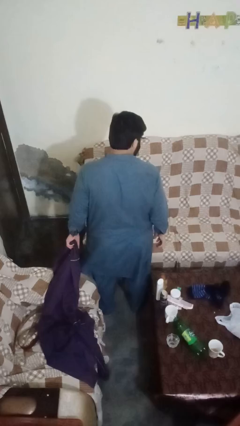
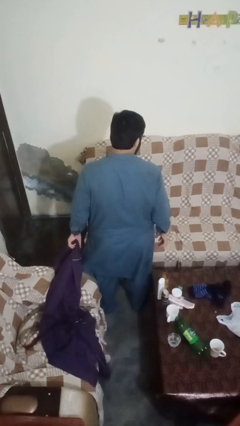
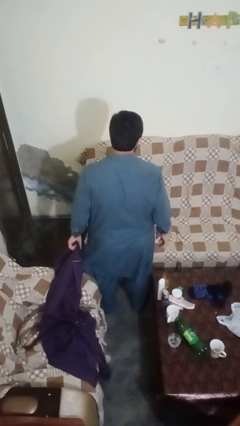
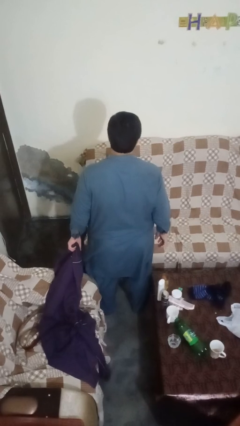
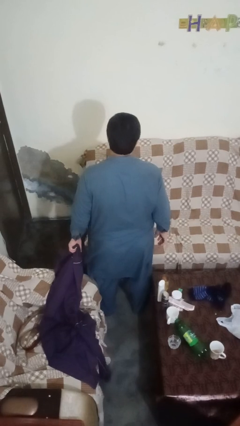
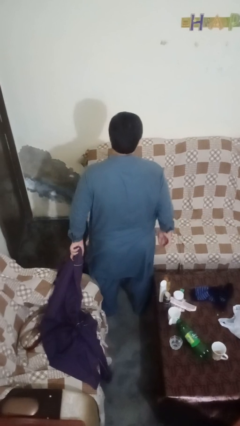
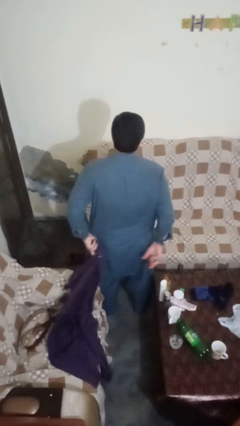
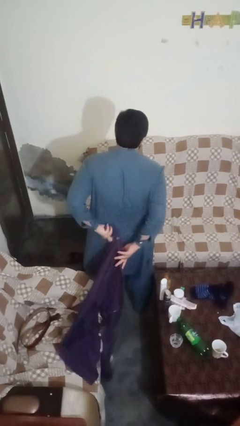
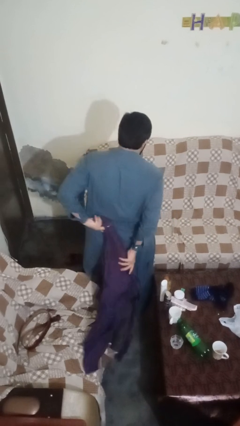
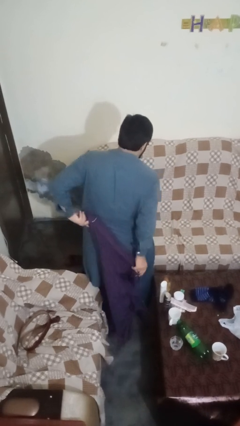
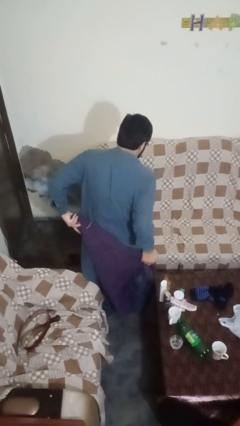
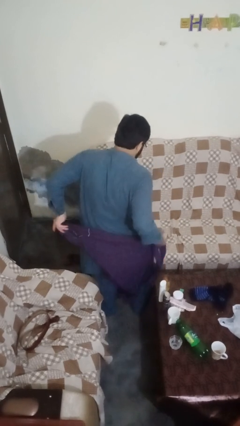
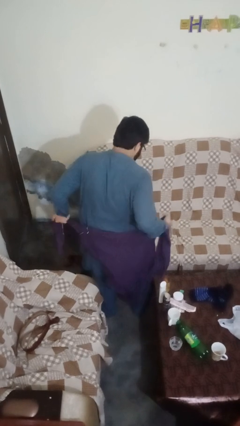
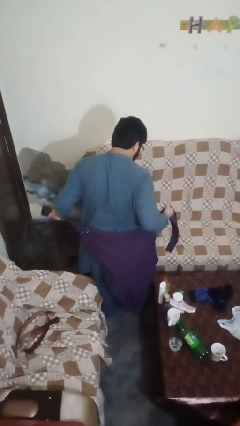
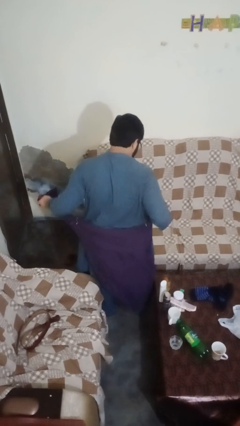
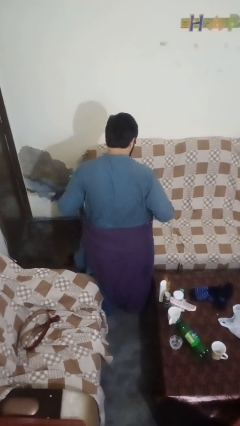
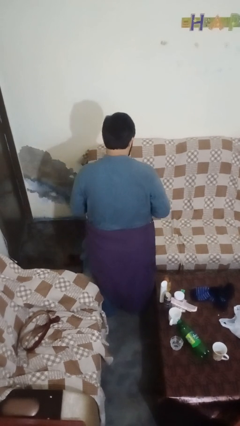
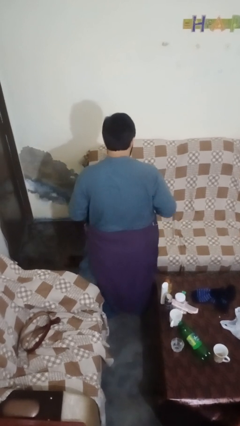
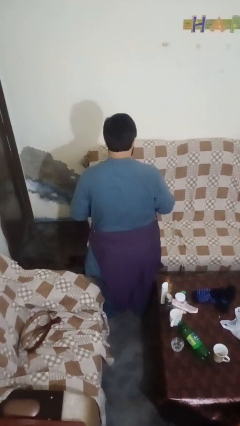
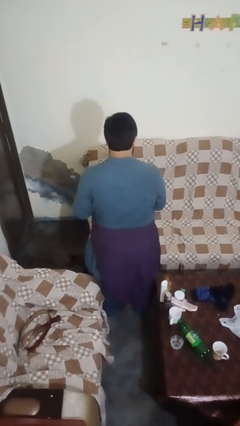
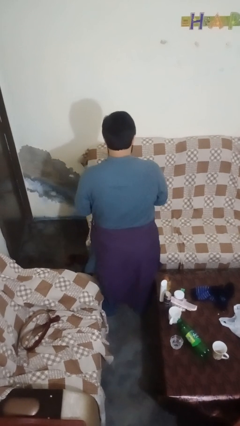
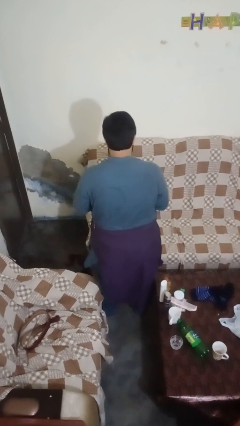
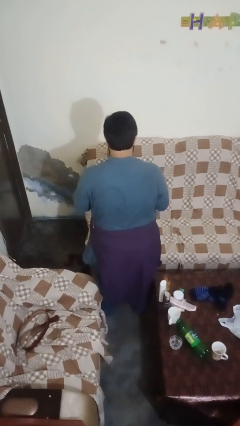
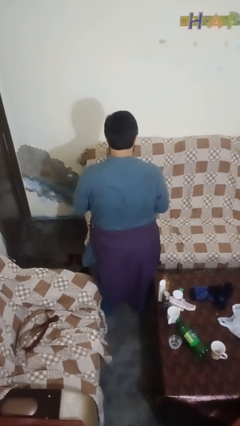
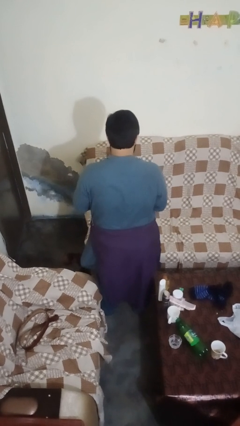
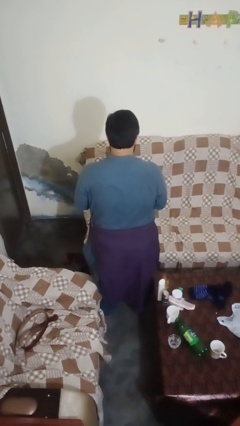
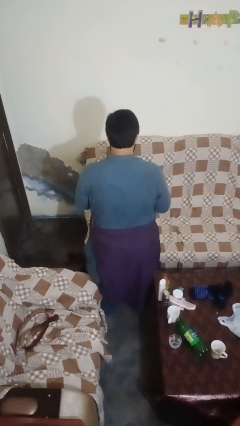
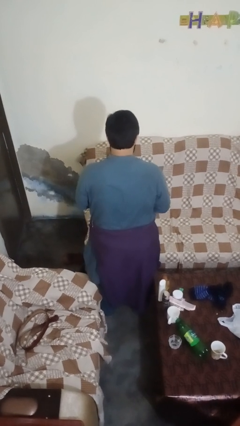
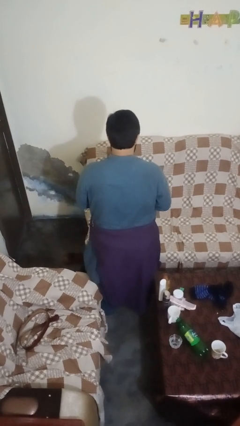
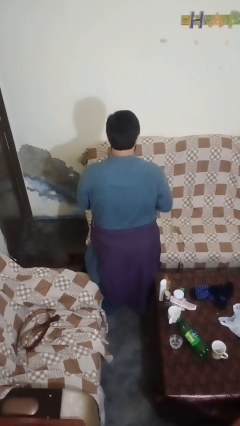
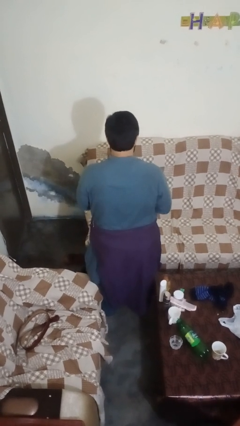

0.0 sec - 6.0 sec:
person ties jacket around waist

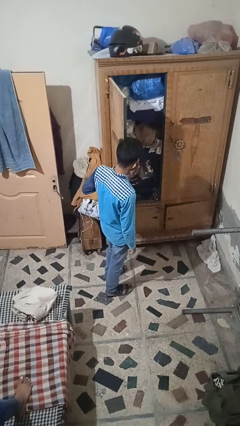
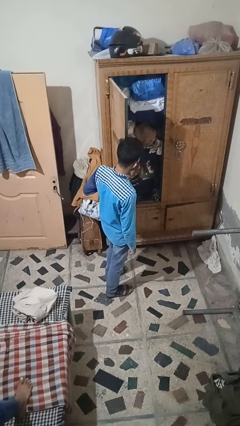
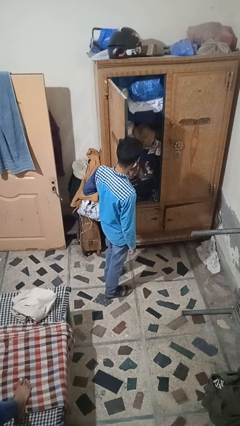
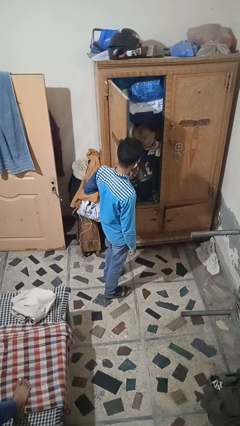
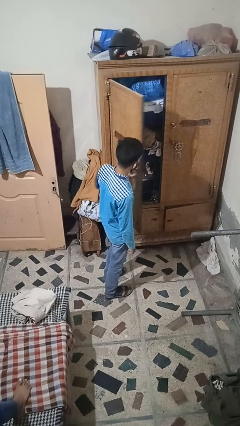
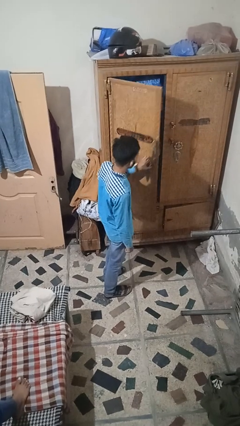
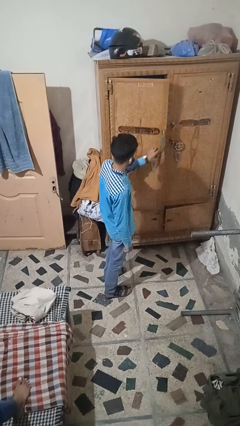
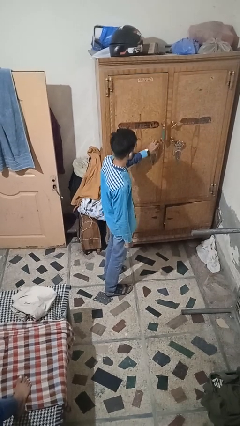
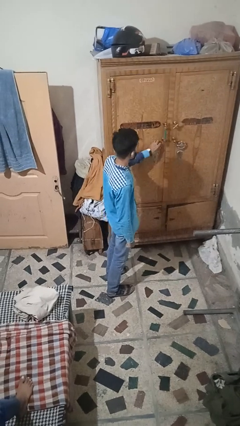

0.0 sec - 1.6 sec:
person closes closet door

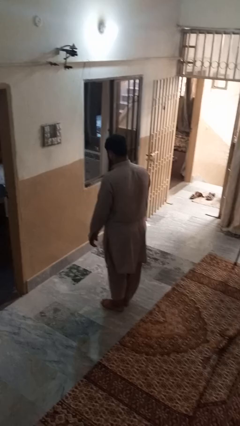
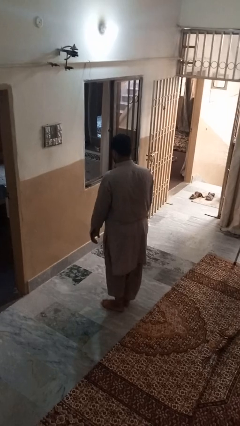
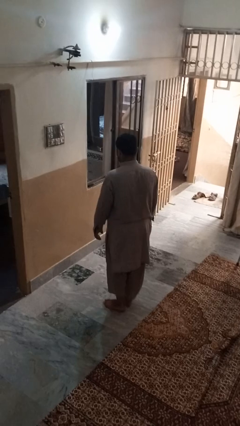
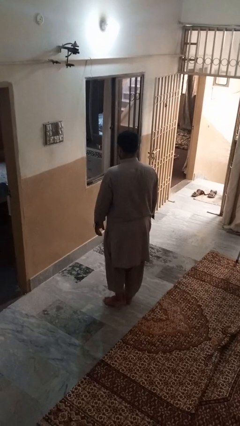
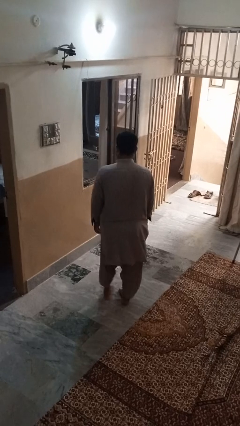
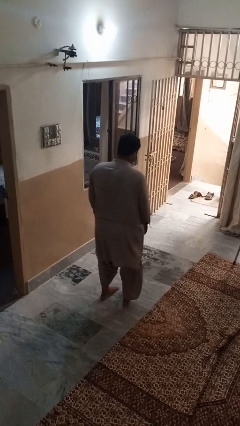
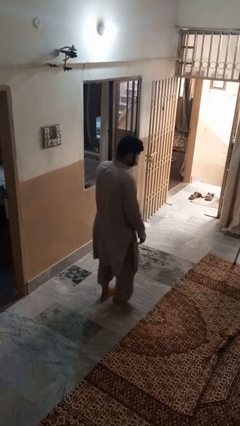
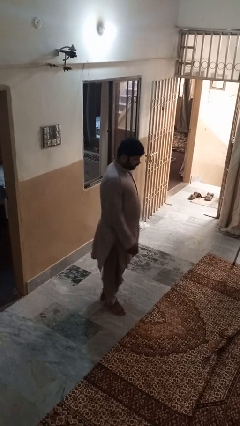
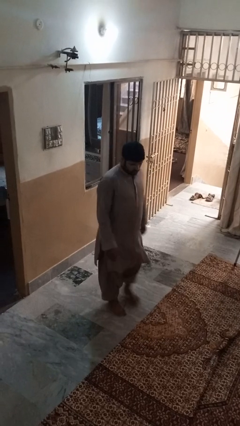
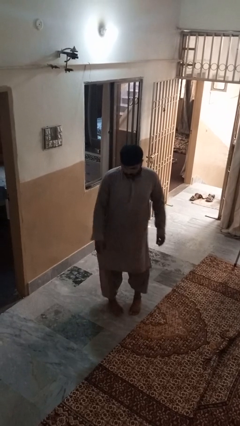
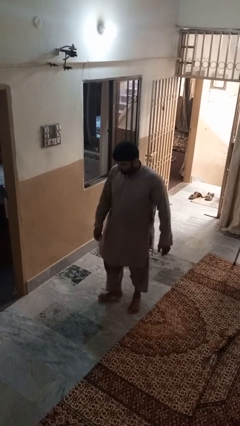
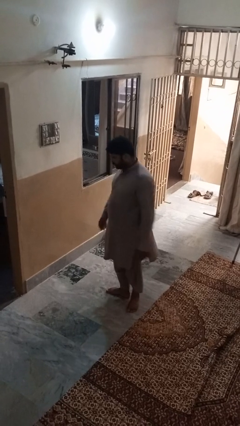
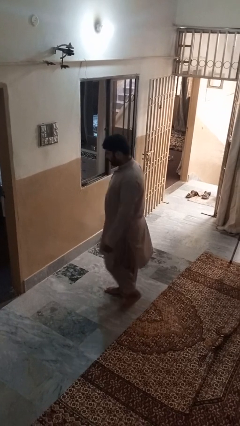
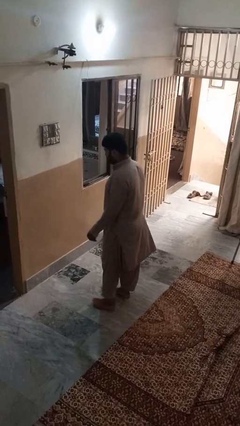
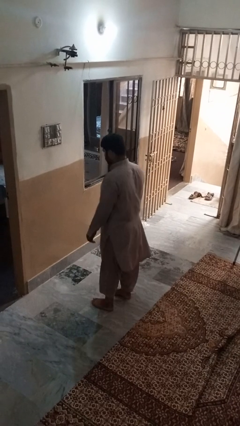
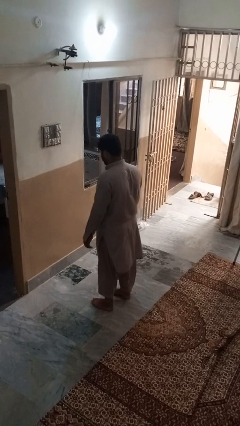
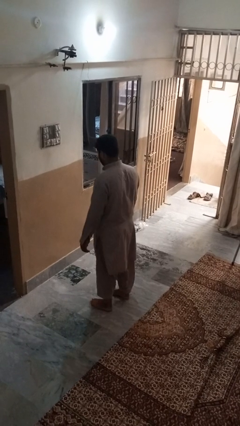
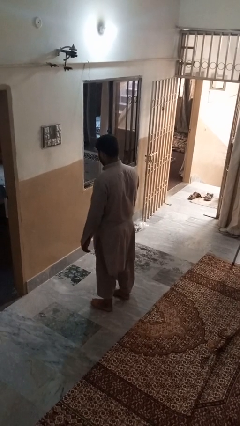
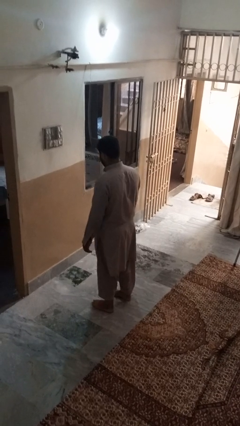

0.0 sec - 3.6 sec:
person twirls

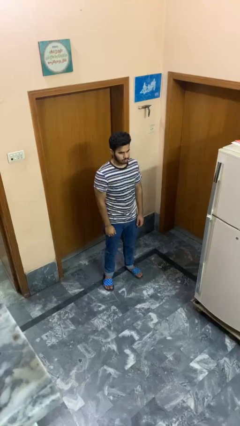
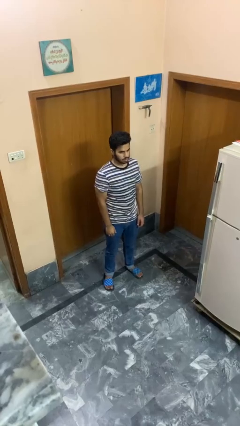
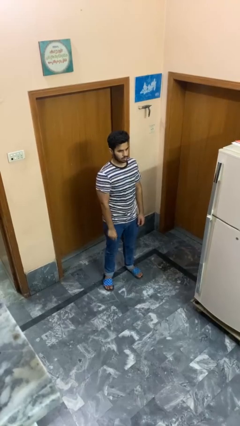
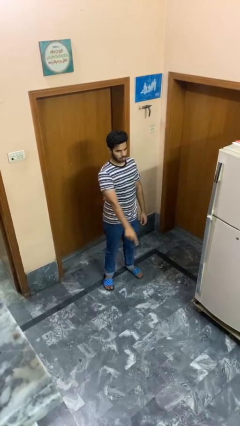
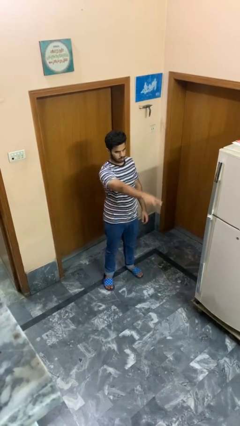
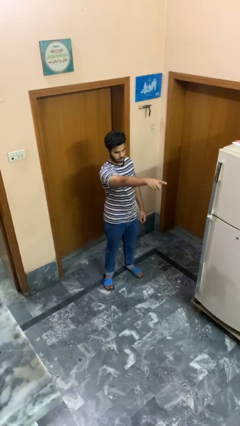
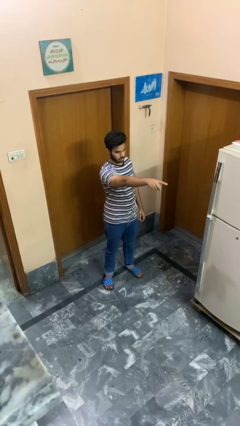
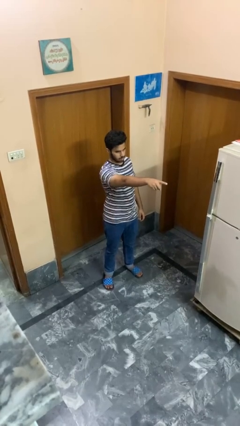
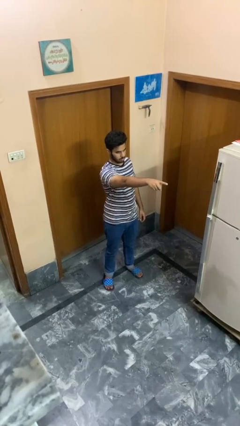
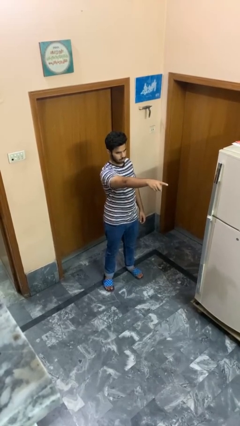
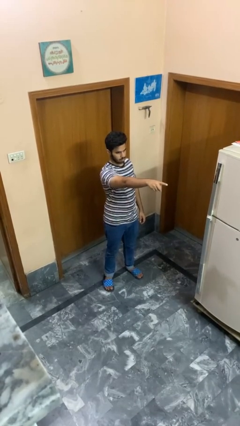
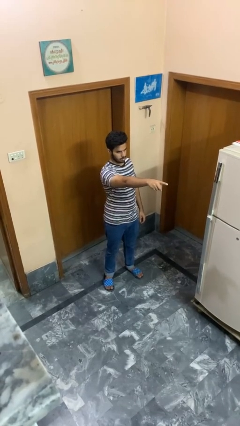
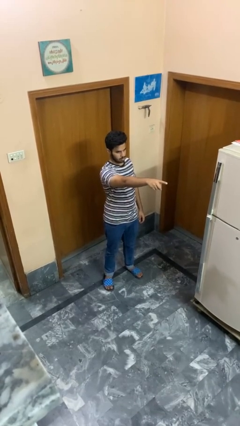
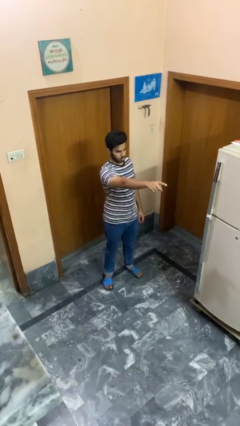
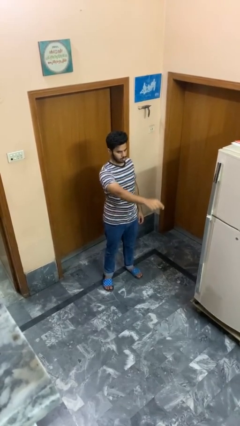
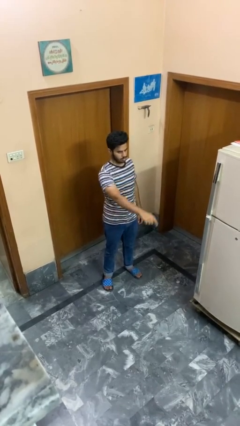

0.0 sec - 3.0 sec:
person points at person

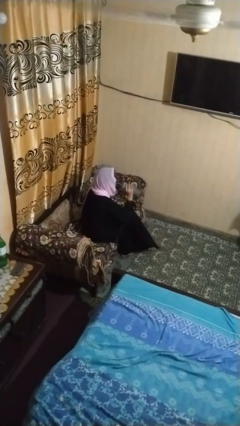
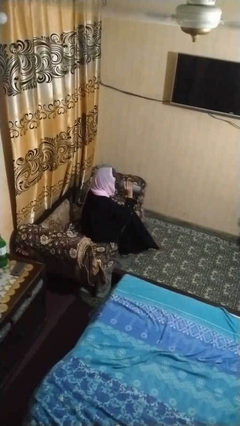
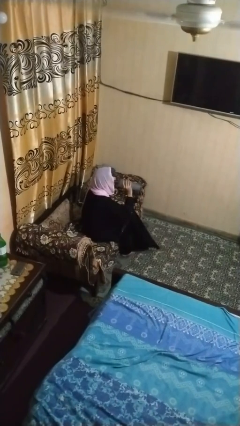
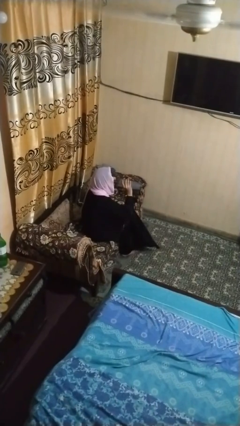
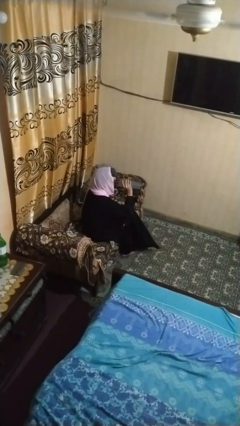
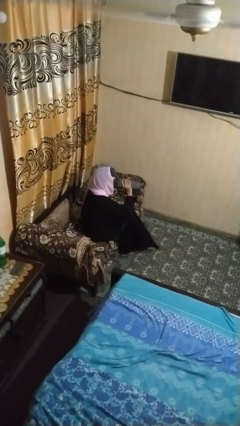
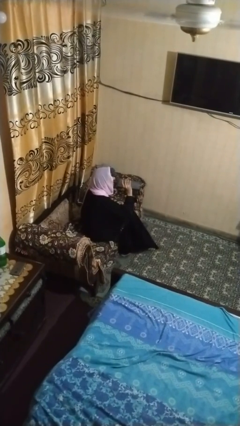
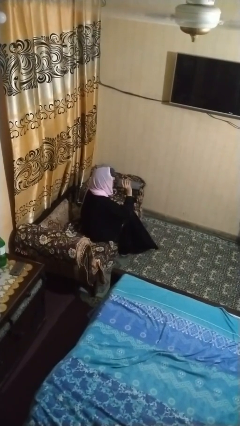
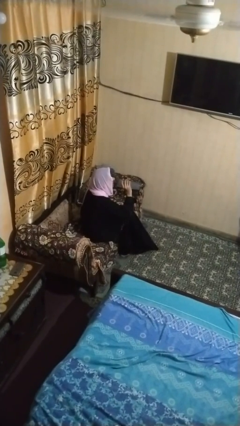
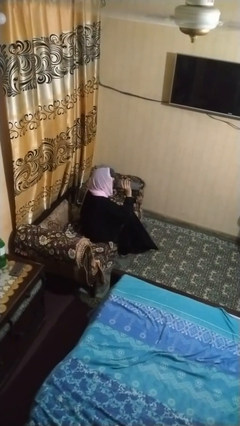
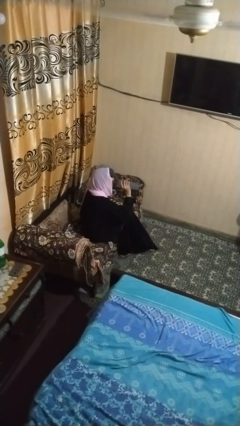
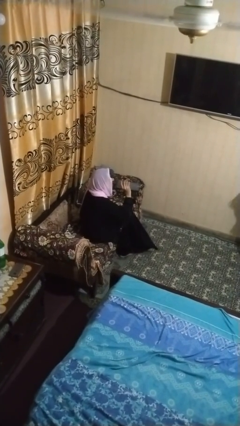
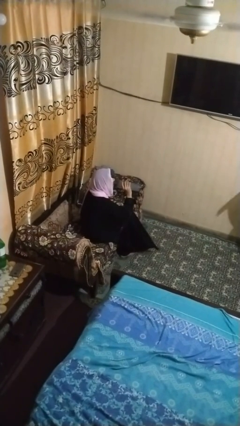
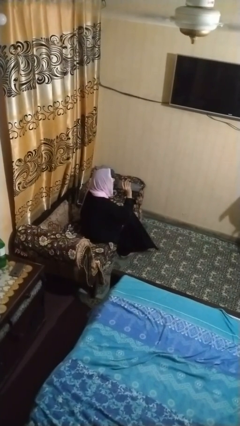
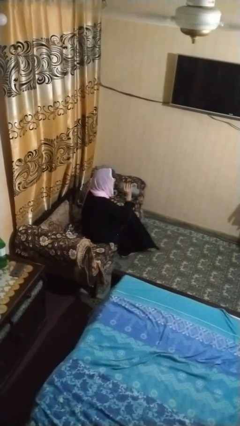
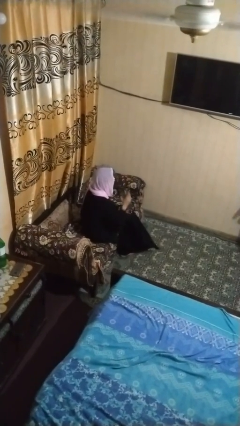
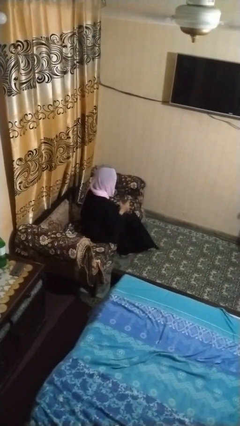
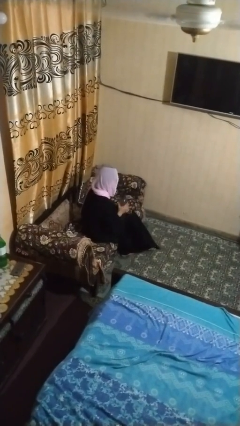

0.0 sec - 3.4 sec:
person drinks from bottle
